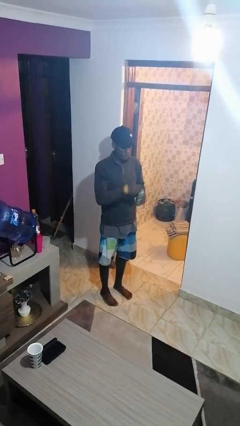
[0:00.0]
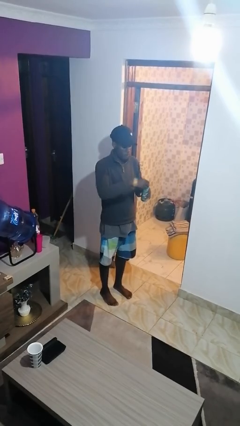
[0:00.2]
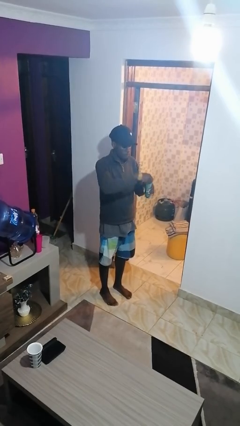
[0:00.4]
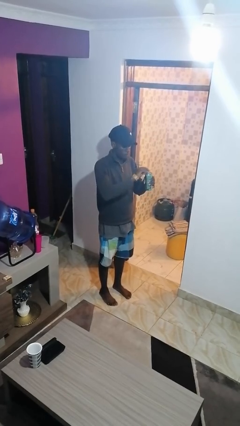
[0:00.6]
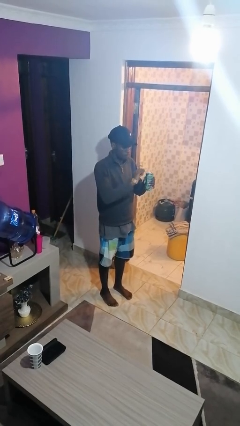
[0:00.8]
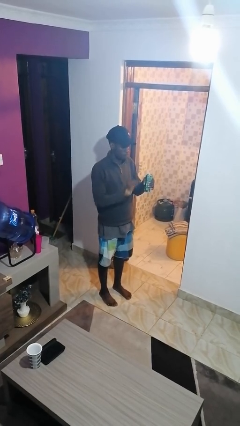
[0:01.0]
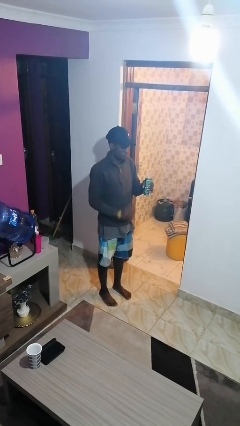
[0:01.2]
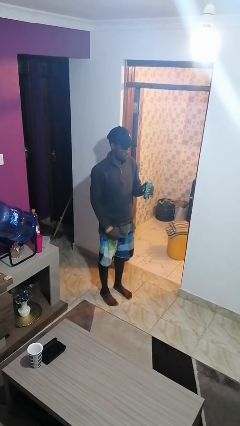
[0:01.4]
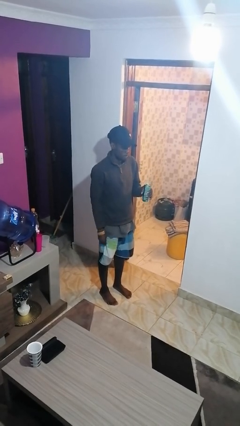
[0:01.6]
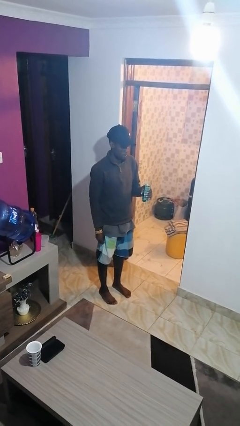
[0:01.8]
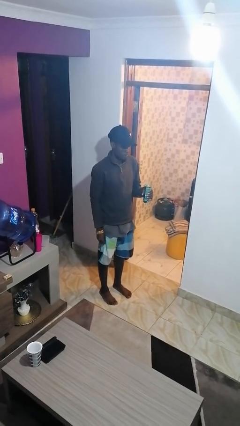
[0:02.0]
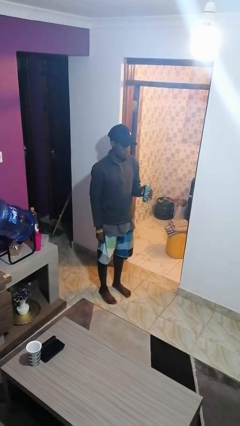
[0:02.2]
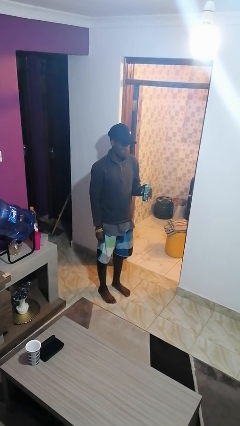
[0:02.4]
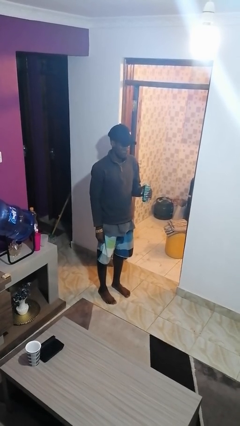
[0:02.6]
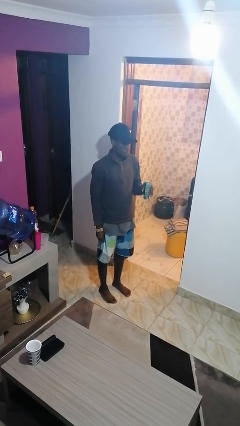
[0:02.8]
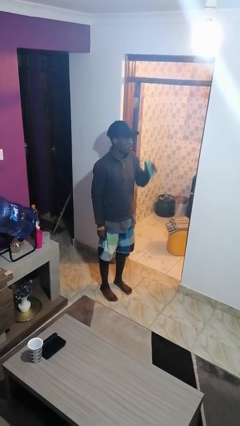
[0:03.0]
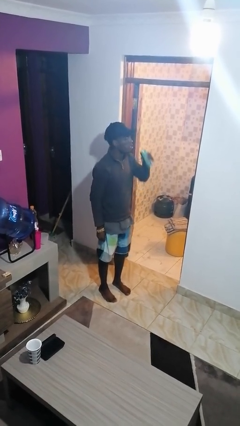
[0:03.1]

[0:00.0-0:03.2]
person opens beverage can

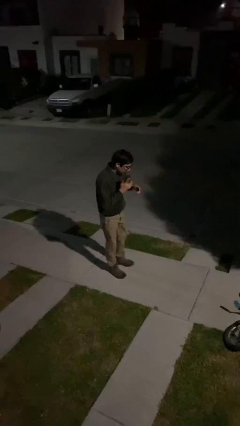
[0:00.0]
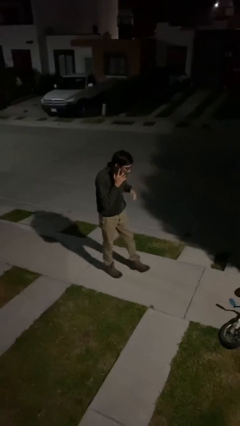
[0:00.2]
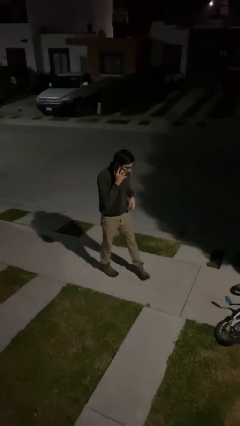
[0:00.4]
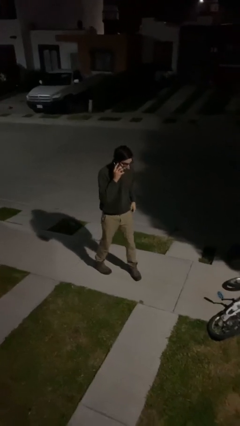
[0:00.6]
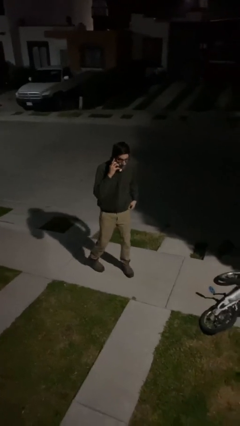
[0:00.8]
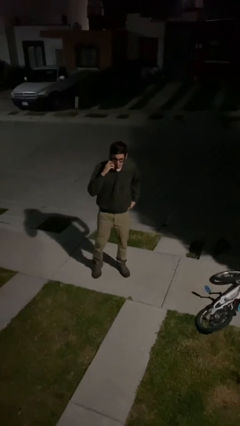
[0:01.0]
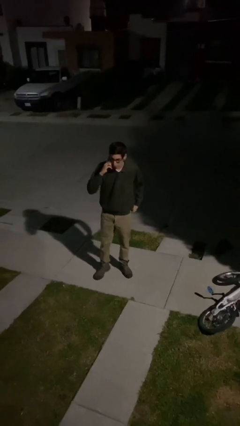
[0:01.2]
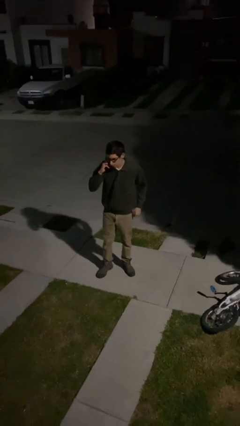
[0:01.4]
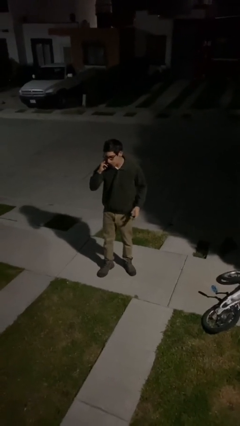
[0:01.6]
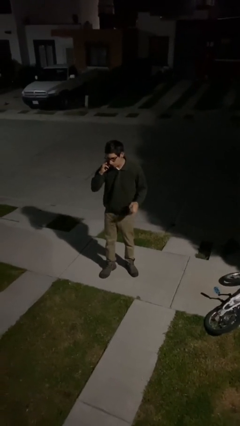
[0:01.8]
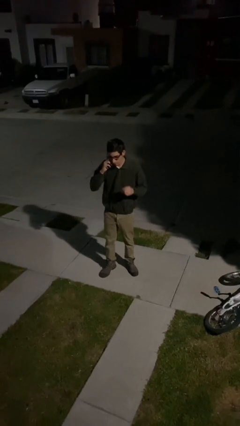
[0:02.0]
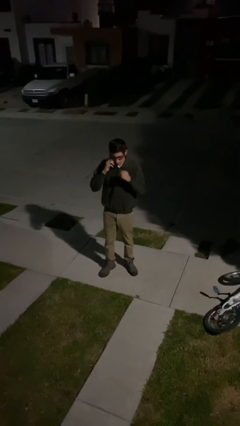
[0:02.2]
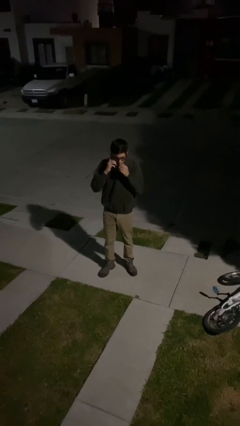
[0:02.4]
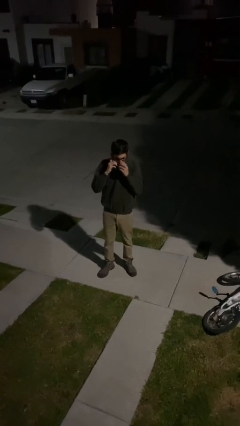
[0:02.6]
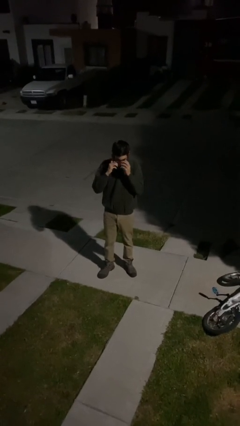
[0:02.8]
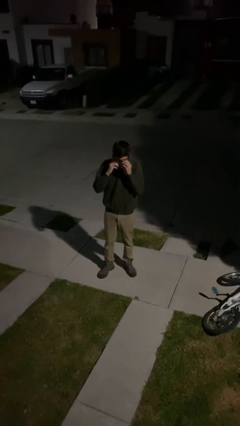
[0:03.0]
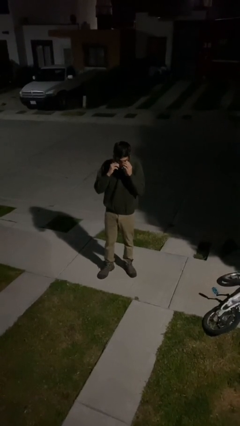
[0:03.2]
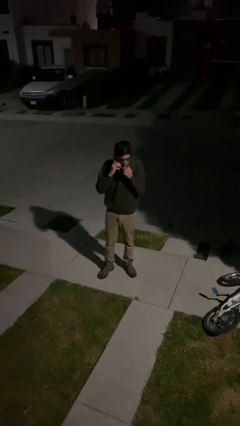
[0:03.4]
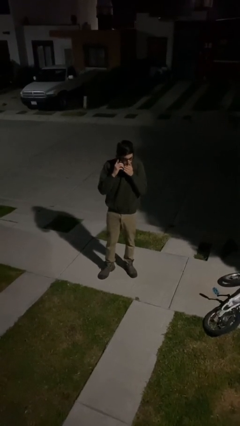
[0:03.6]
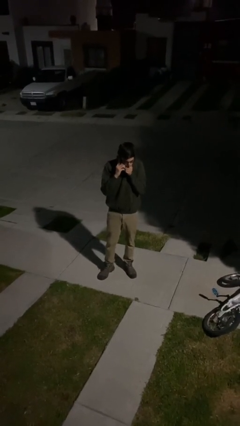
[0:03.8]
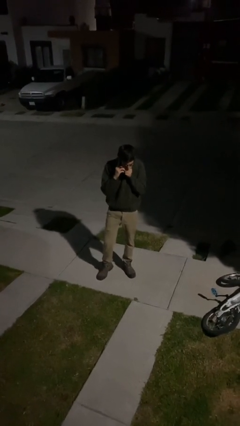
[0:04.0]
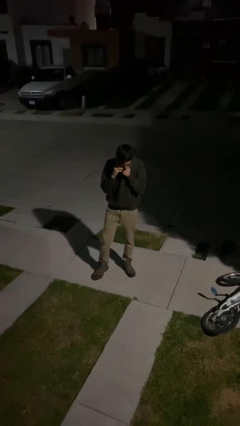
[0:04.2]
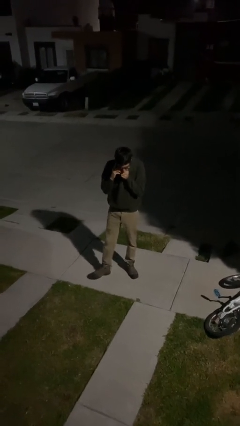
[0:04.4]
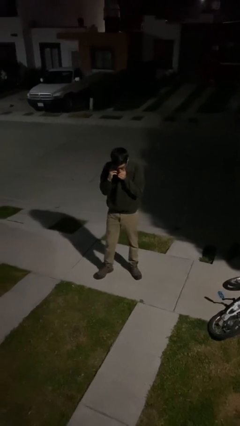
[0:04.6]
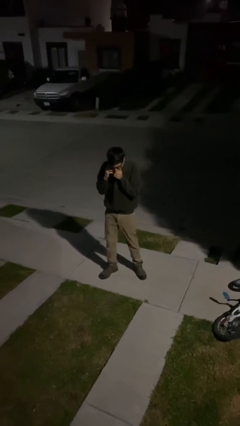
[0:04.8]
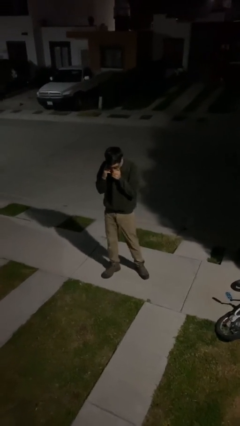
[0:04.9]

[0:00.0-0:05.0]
person talks on phone

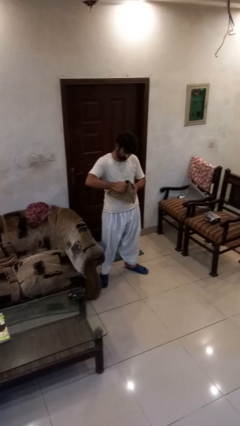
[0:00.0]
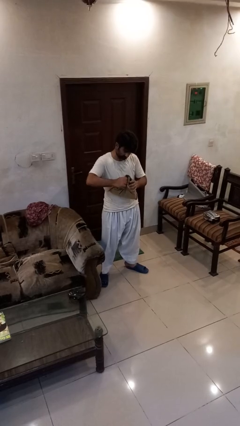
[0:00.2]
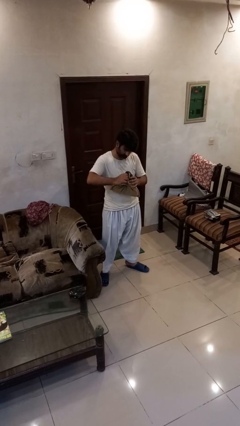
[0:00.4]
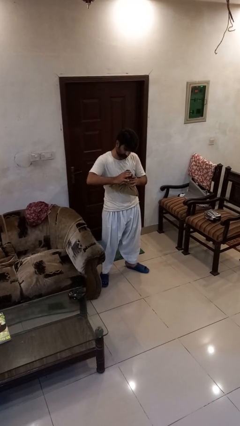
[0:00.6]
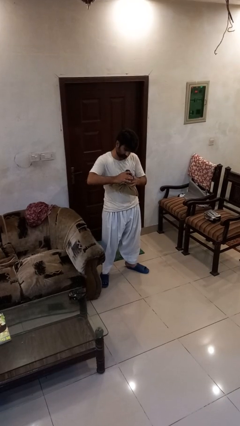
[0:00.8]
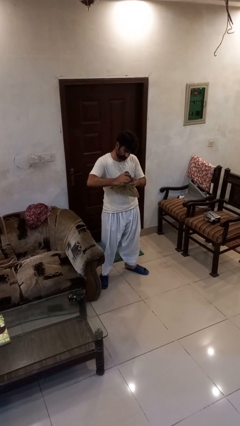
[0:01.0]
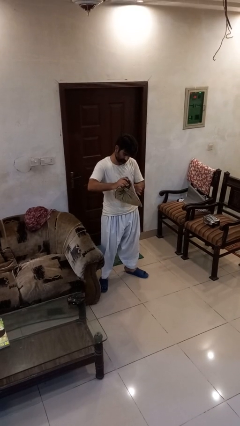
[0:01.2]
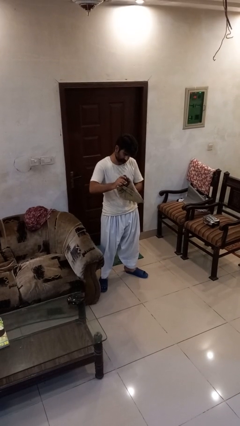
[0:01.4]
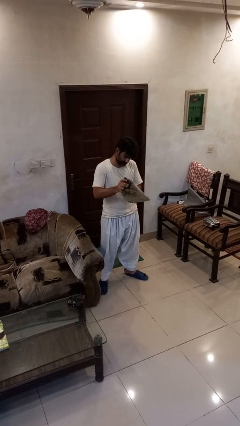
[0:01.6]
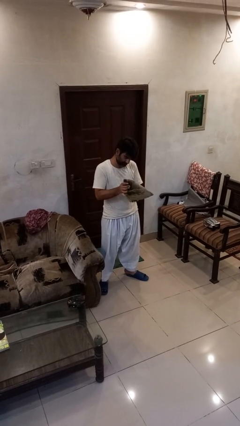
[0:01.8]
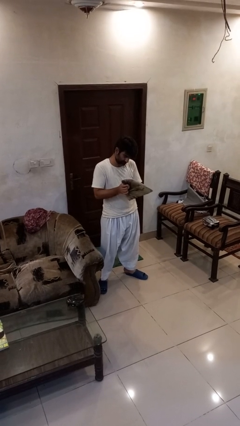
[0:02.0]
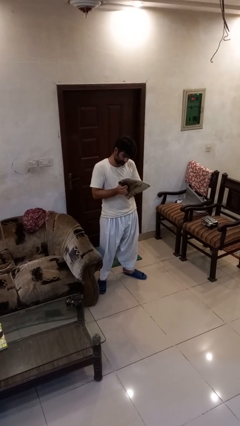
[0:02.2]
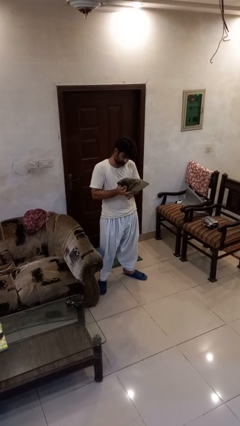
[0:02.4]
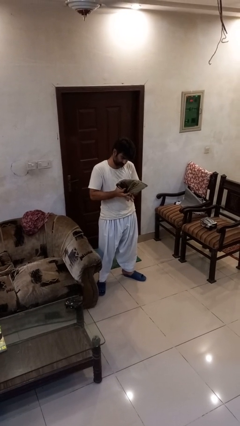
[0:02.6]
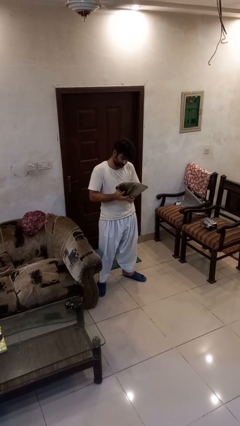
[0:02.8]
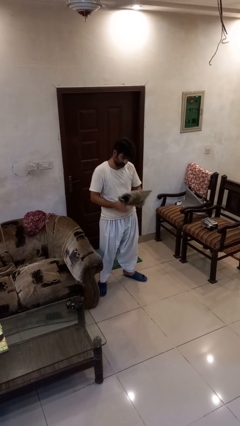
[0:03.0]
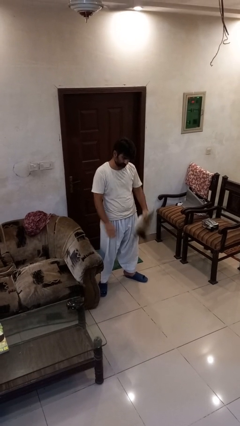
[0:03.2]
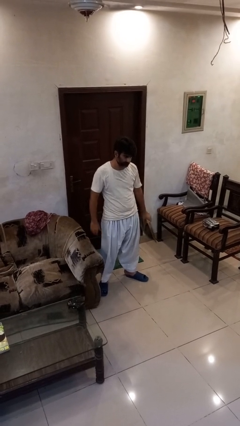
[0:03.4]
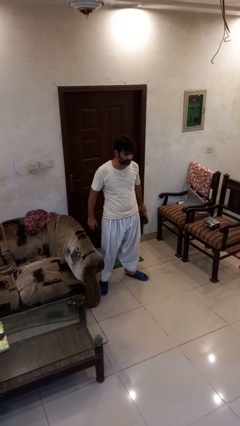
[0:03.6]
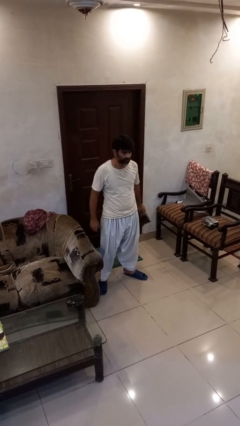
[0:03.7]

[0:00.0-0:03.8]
person squeezes object

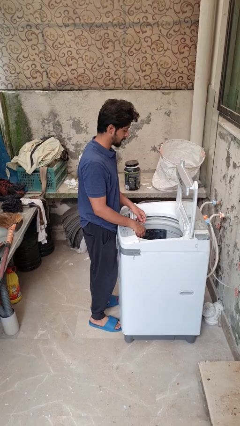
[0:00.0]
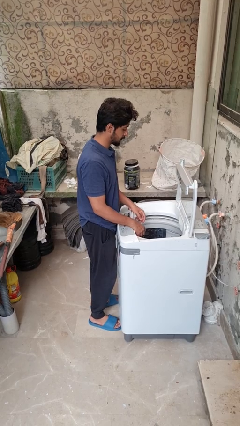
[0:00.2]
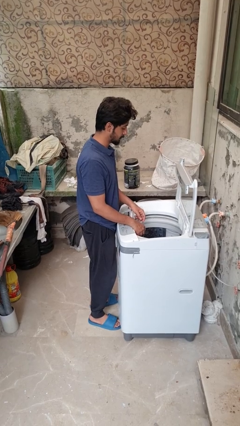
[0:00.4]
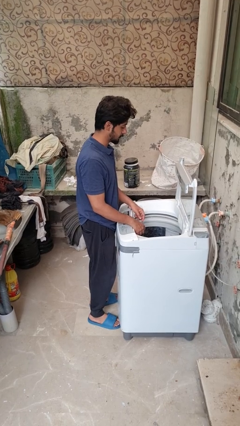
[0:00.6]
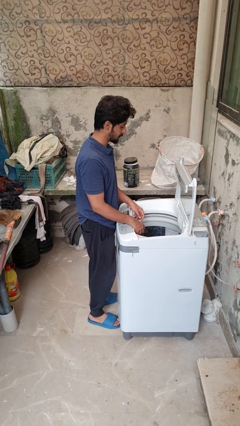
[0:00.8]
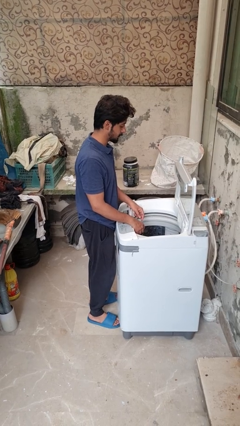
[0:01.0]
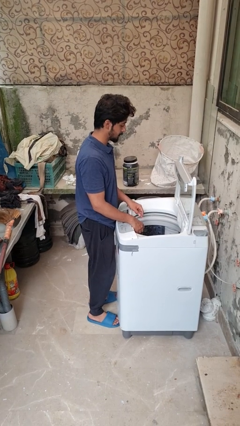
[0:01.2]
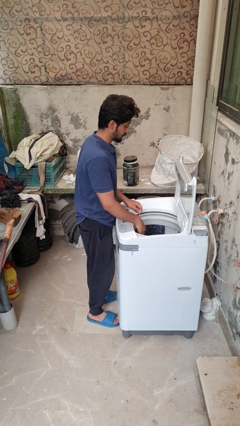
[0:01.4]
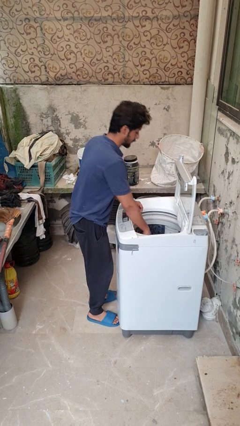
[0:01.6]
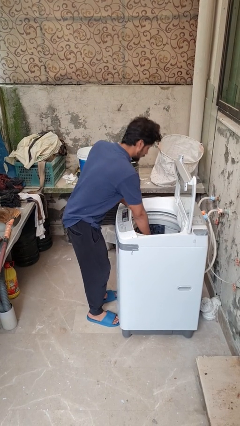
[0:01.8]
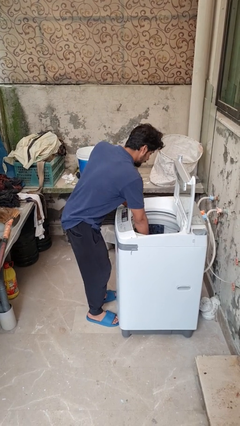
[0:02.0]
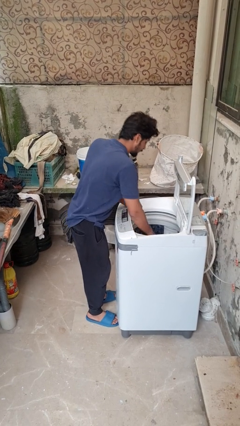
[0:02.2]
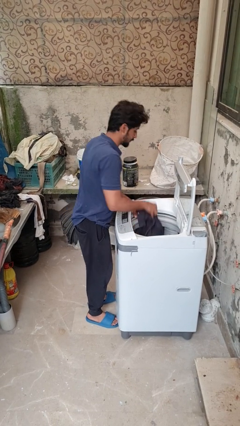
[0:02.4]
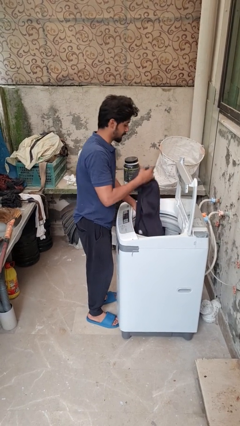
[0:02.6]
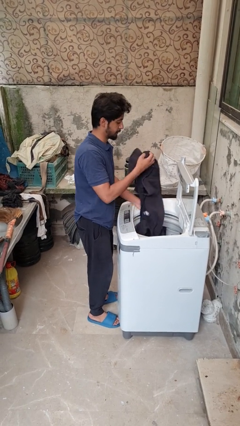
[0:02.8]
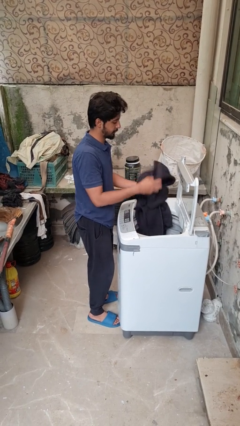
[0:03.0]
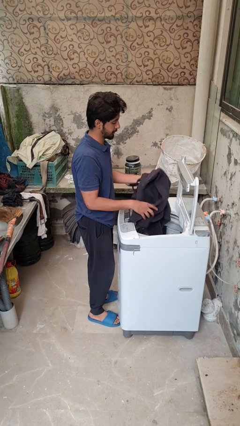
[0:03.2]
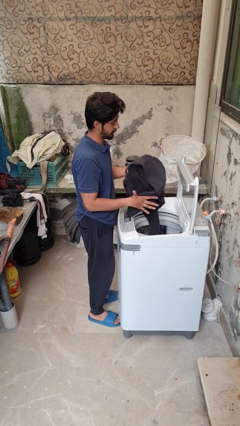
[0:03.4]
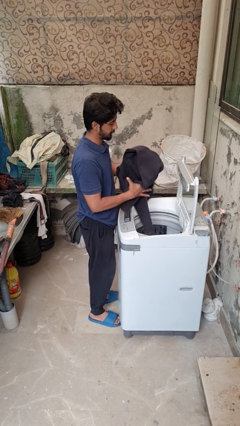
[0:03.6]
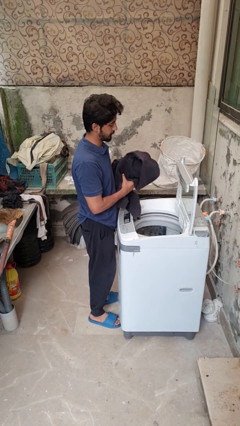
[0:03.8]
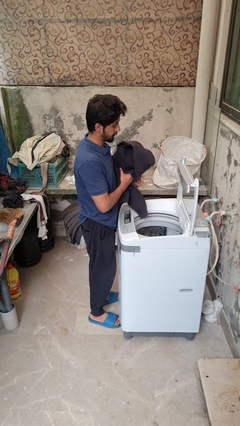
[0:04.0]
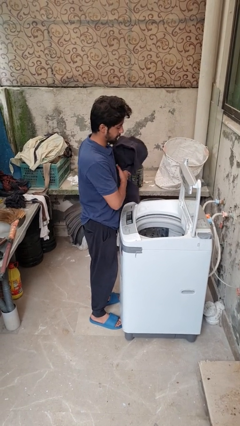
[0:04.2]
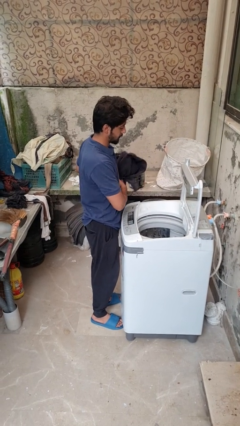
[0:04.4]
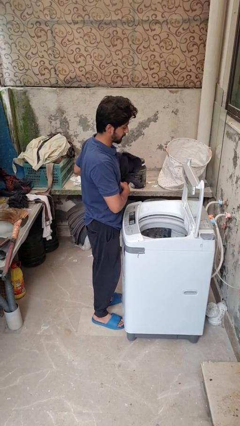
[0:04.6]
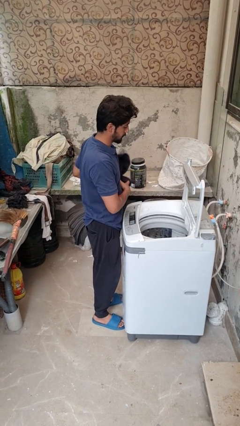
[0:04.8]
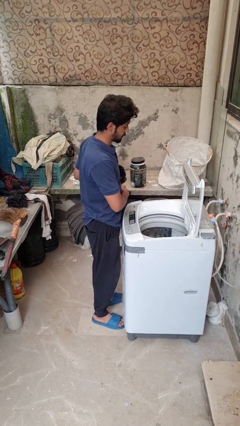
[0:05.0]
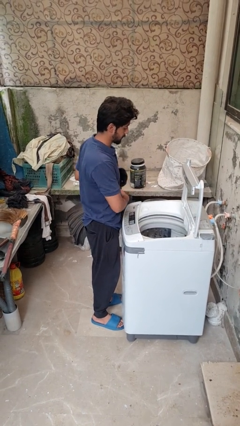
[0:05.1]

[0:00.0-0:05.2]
person unloads dryer

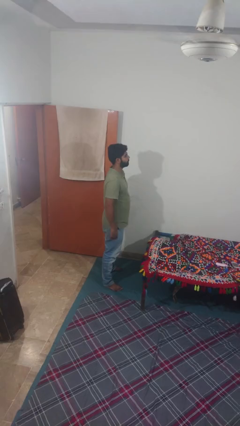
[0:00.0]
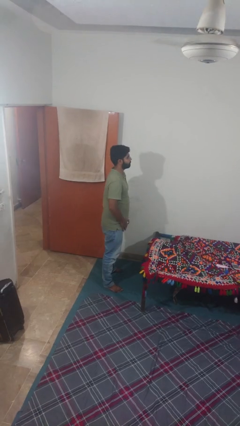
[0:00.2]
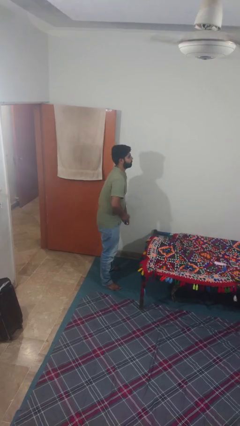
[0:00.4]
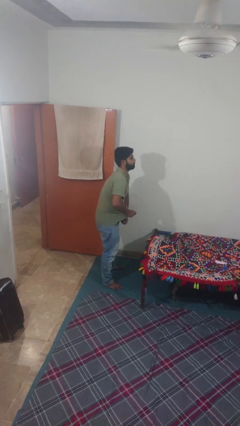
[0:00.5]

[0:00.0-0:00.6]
person applies deodorant
